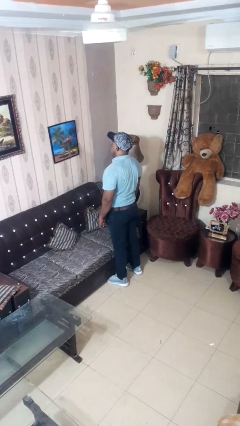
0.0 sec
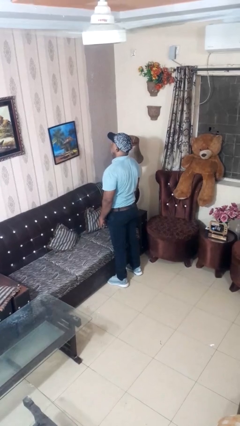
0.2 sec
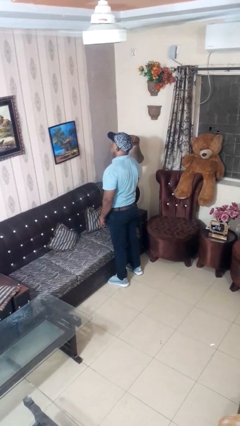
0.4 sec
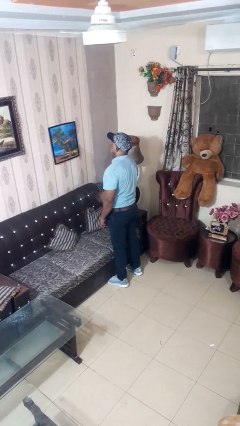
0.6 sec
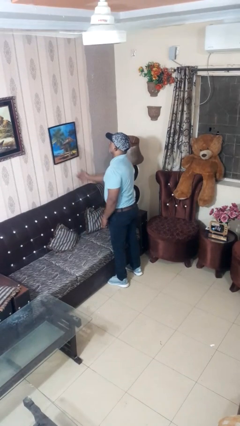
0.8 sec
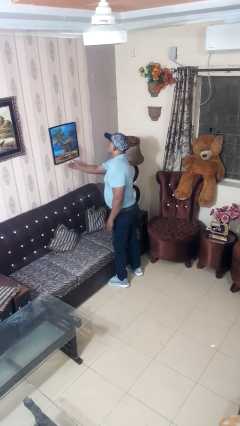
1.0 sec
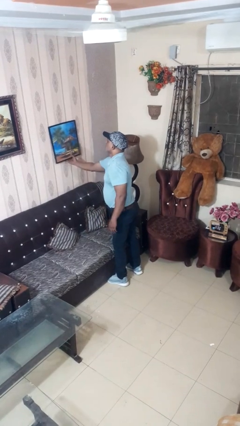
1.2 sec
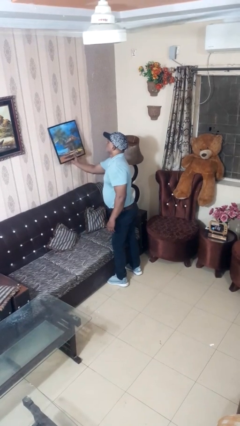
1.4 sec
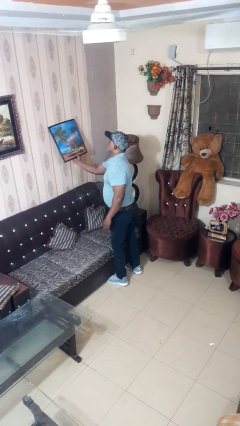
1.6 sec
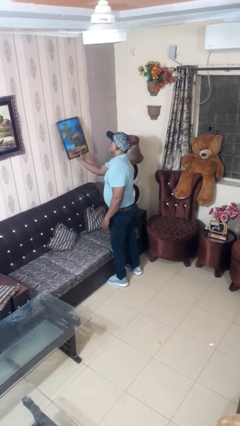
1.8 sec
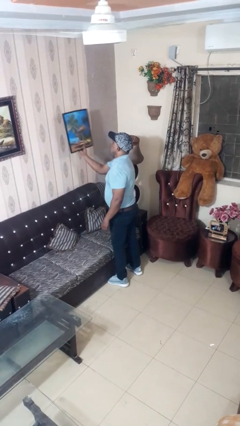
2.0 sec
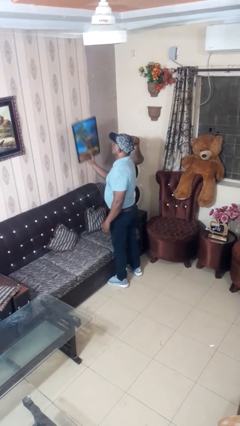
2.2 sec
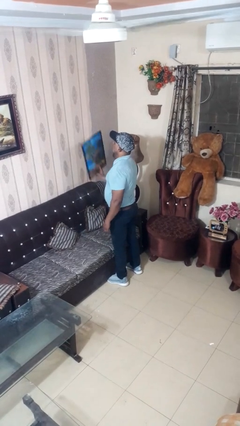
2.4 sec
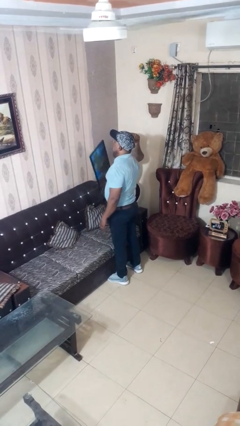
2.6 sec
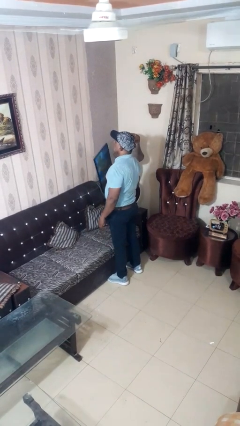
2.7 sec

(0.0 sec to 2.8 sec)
person takes down picture frame

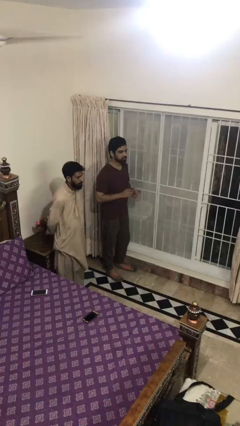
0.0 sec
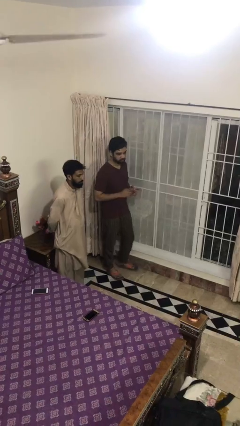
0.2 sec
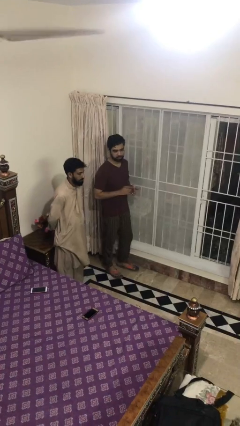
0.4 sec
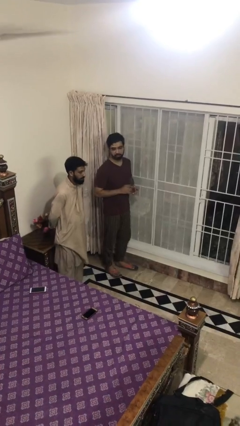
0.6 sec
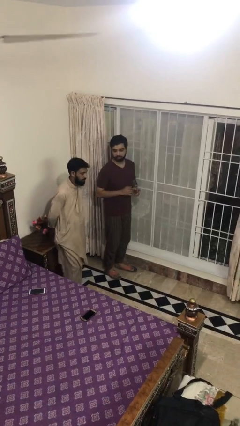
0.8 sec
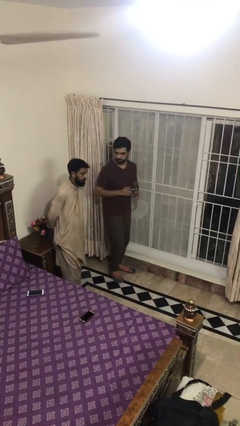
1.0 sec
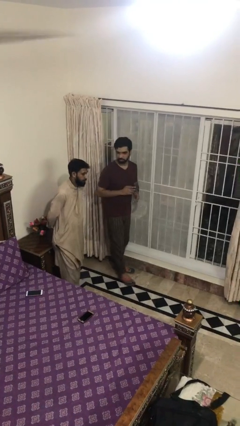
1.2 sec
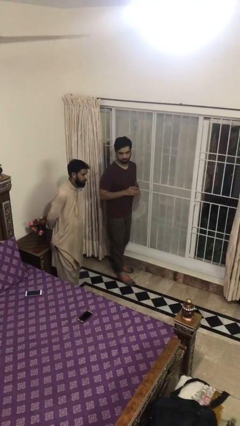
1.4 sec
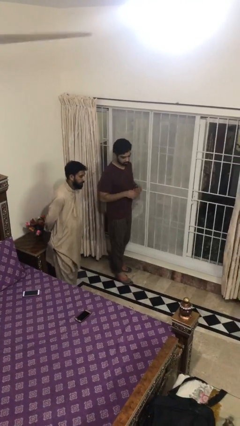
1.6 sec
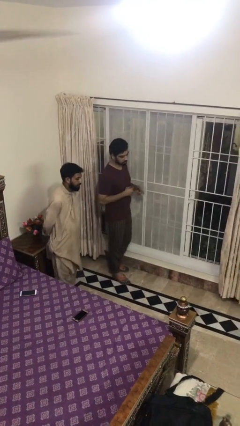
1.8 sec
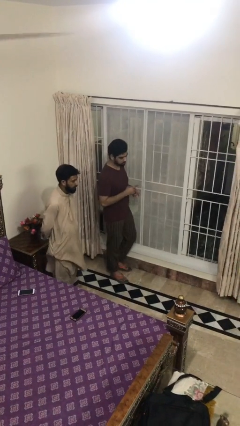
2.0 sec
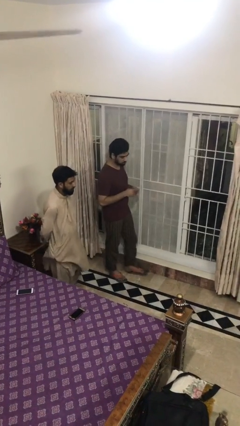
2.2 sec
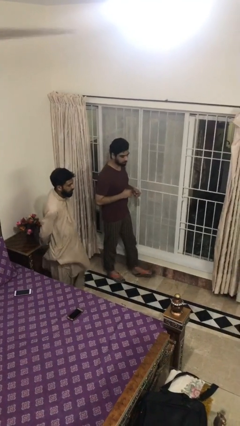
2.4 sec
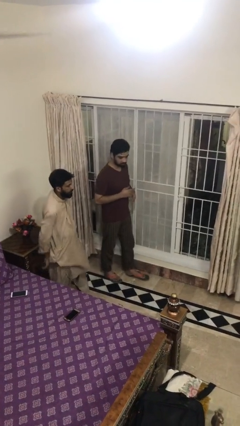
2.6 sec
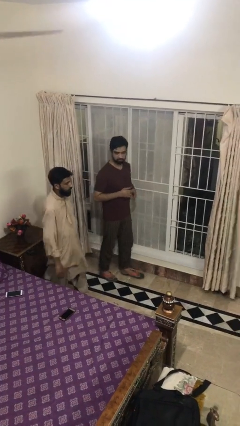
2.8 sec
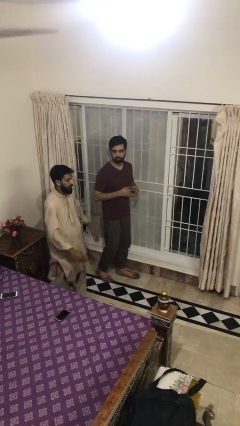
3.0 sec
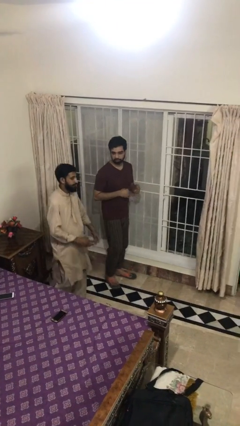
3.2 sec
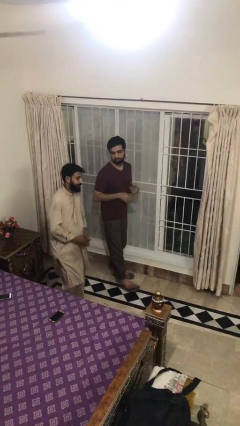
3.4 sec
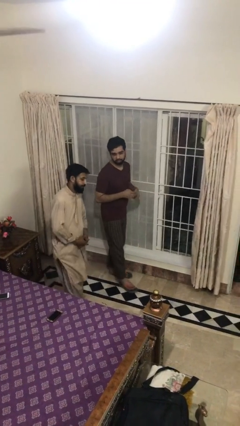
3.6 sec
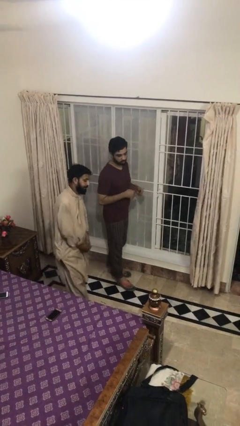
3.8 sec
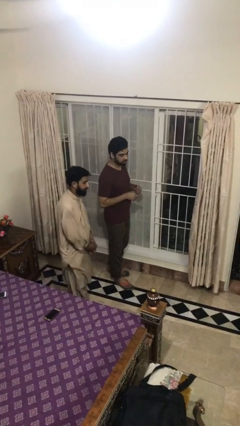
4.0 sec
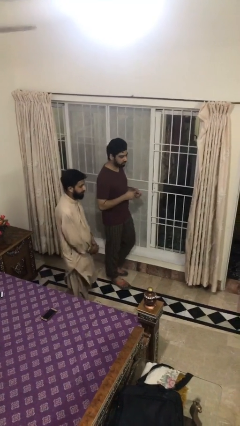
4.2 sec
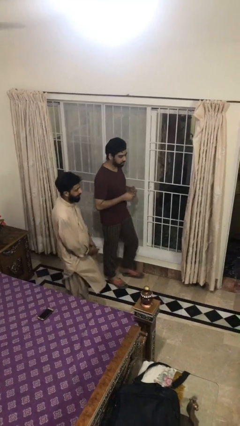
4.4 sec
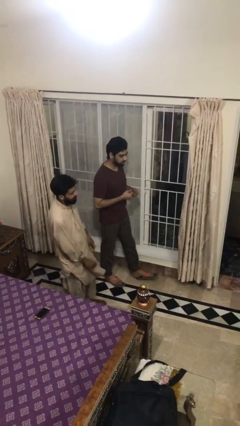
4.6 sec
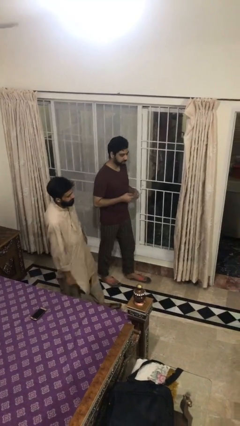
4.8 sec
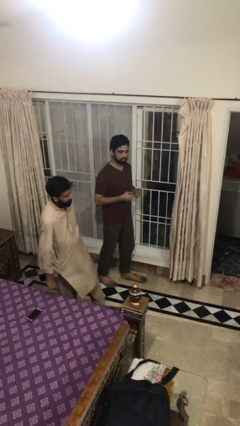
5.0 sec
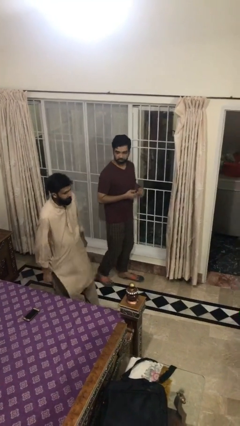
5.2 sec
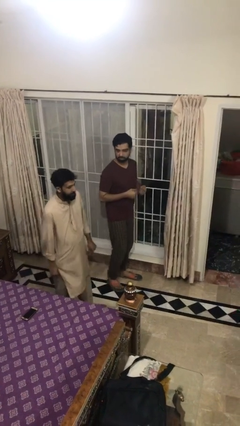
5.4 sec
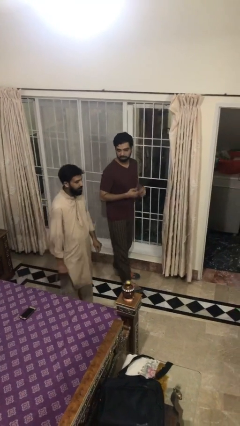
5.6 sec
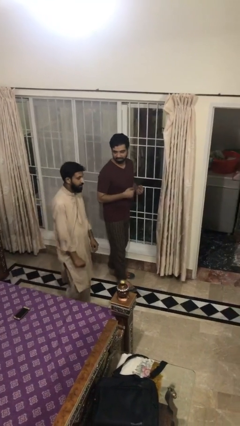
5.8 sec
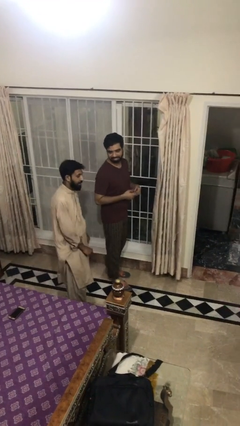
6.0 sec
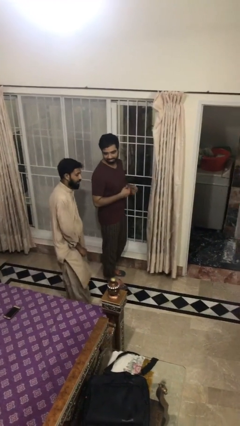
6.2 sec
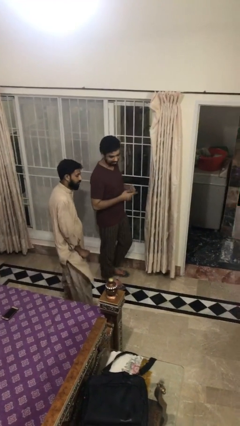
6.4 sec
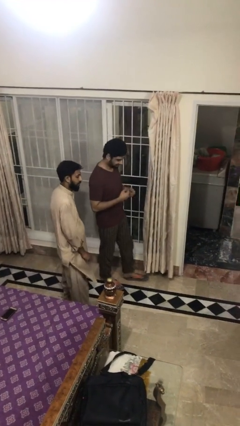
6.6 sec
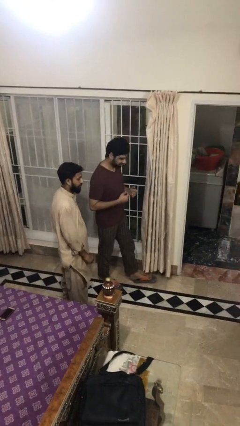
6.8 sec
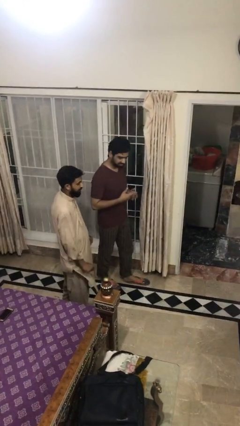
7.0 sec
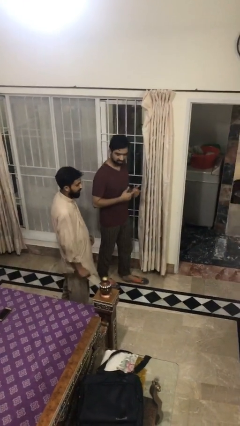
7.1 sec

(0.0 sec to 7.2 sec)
person talks to person

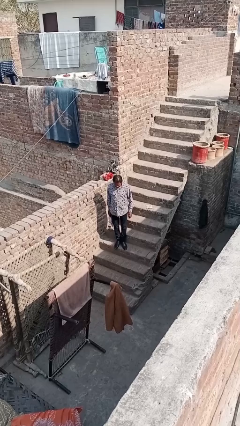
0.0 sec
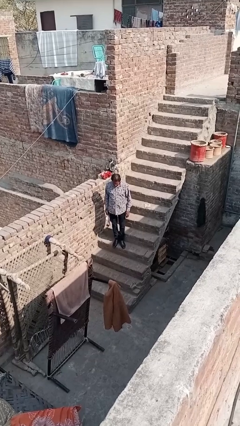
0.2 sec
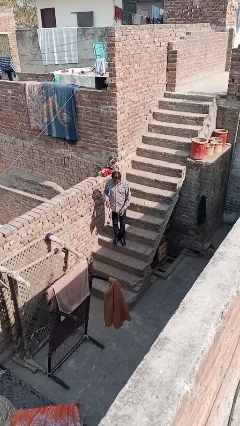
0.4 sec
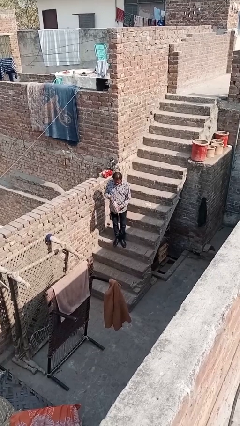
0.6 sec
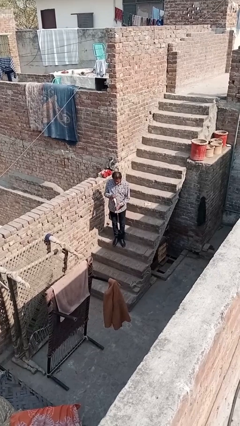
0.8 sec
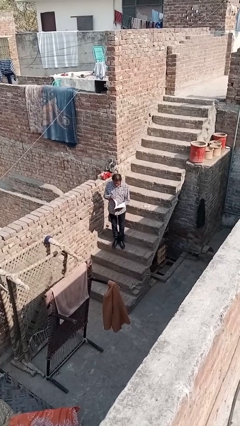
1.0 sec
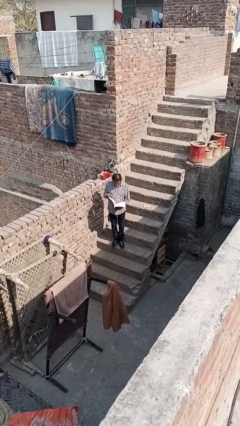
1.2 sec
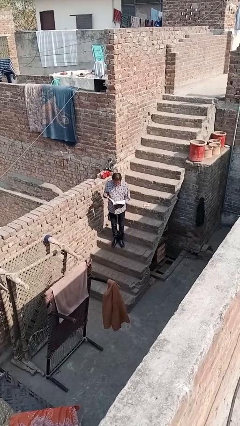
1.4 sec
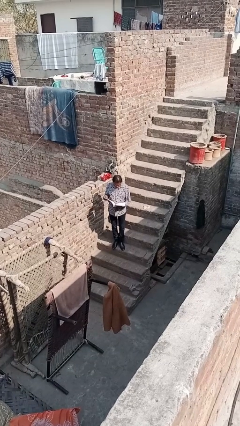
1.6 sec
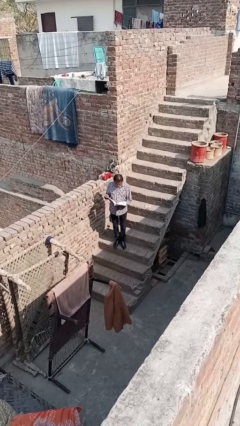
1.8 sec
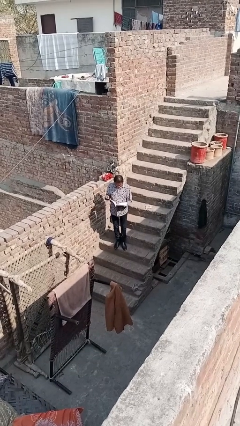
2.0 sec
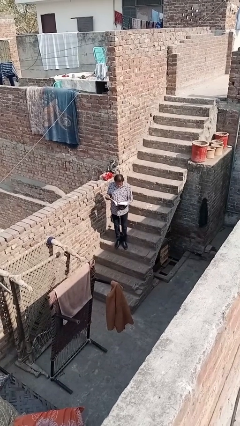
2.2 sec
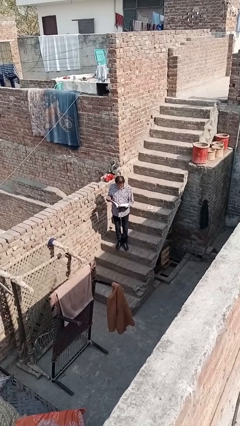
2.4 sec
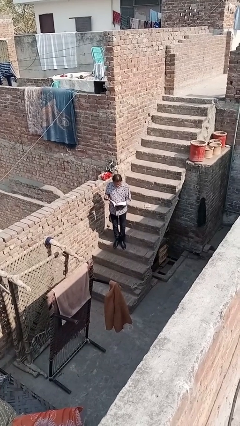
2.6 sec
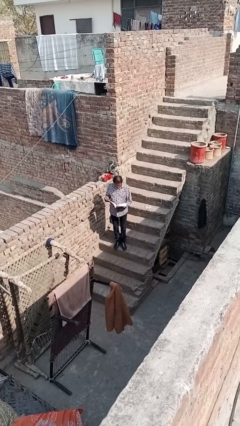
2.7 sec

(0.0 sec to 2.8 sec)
person reads document

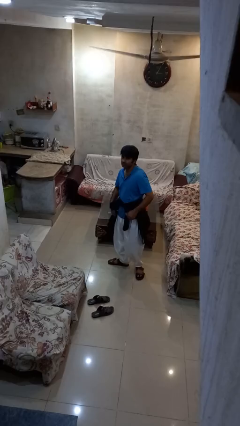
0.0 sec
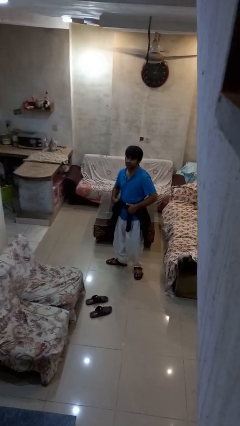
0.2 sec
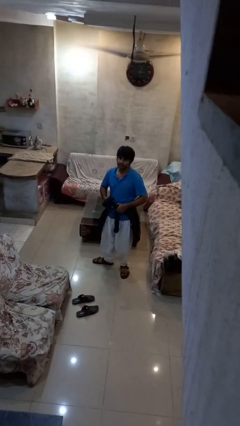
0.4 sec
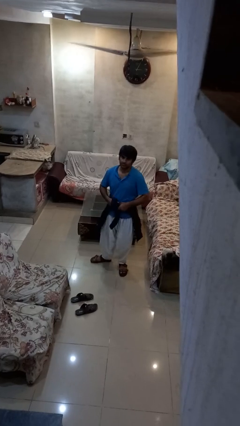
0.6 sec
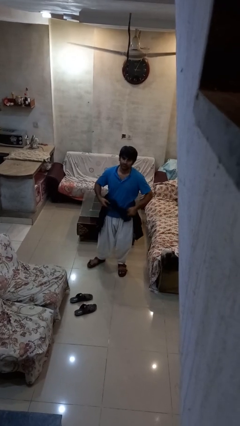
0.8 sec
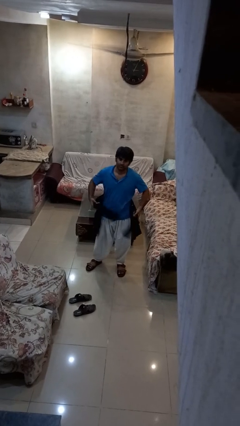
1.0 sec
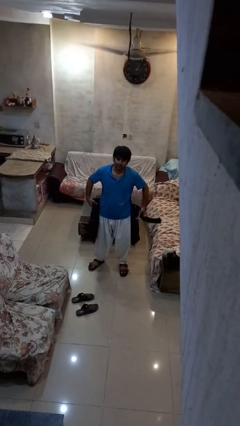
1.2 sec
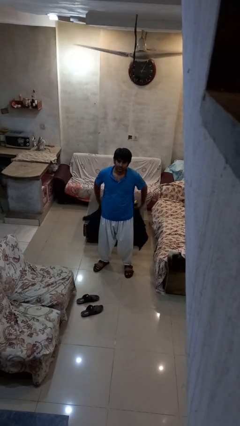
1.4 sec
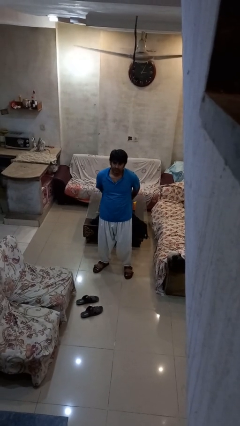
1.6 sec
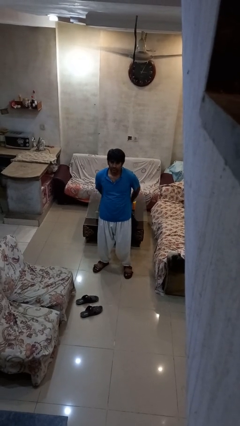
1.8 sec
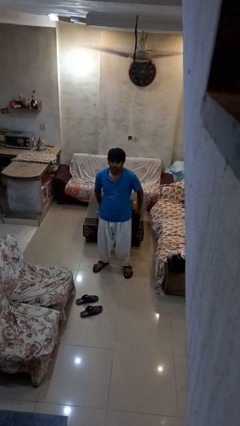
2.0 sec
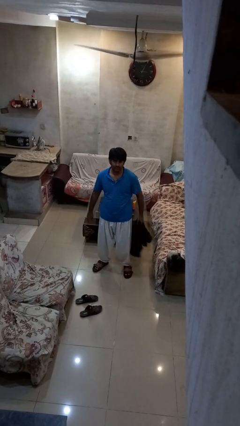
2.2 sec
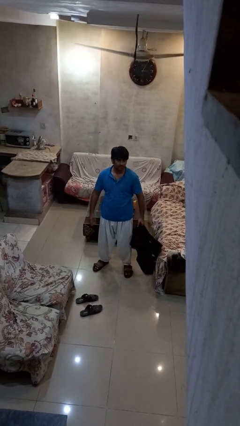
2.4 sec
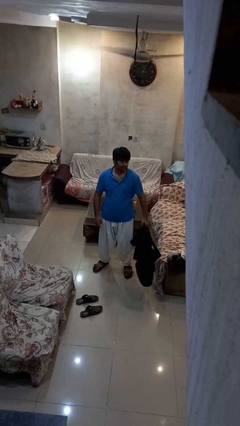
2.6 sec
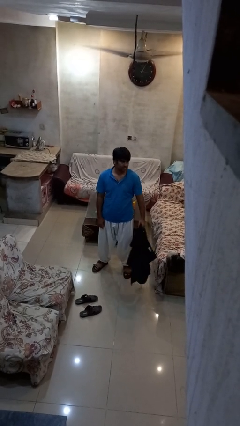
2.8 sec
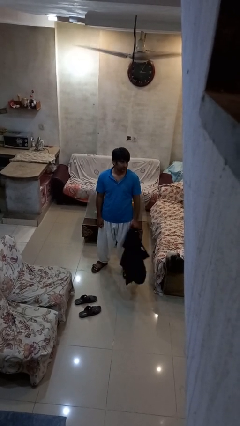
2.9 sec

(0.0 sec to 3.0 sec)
person unties jacket around waist

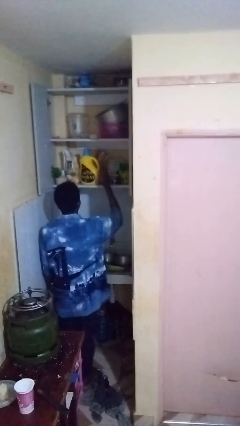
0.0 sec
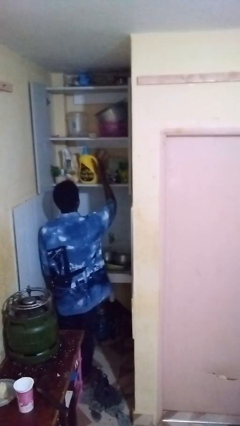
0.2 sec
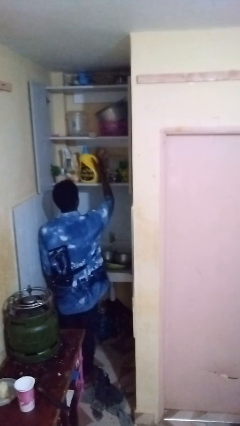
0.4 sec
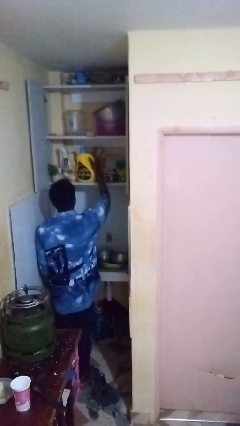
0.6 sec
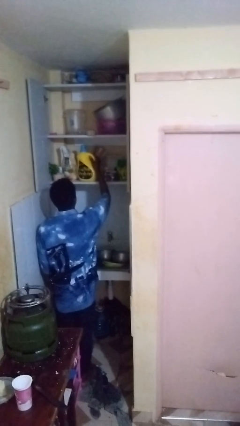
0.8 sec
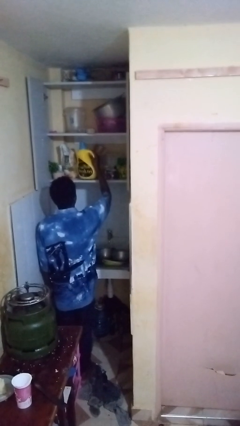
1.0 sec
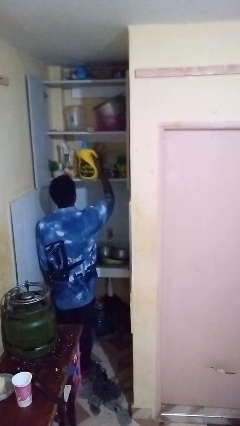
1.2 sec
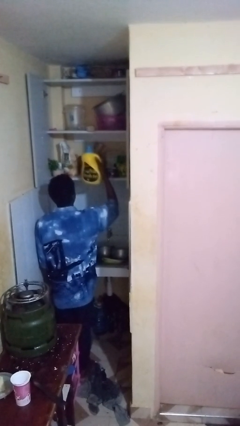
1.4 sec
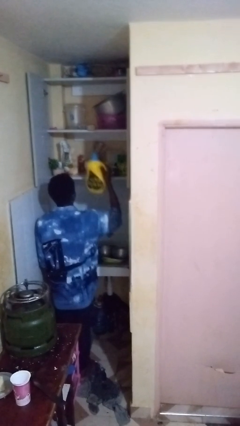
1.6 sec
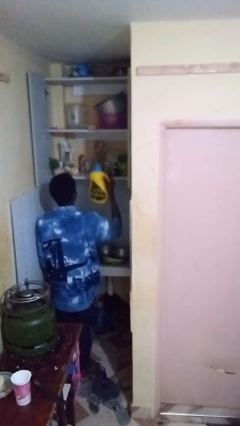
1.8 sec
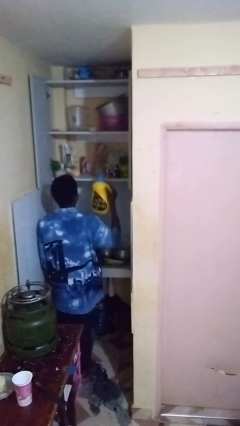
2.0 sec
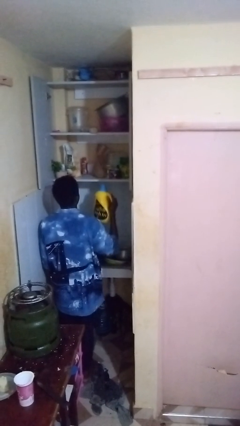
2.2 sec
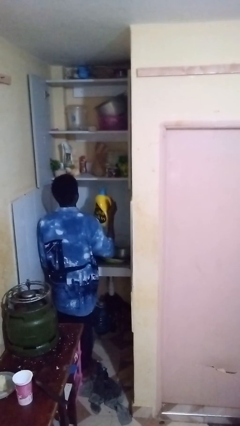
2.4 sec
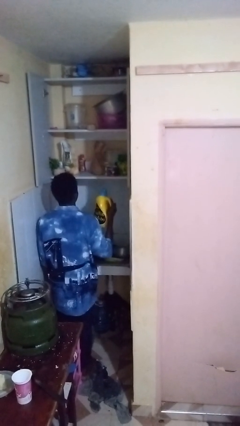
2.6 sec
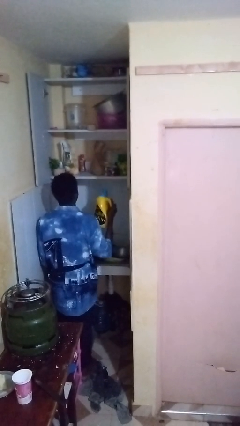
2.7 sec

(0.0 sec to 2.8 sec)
person picks up object from countertop
